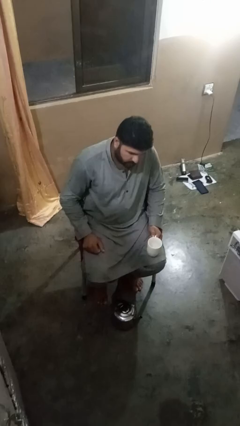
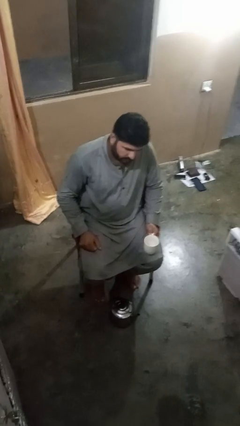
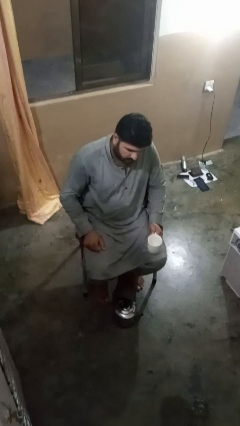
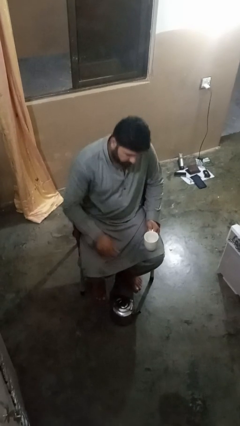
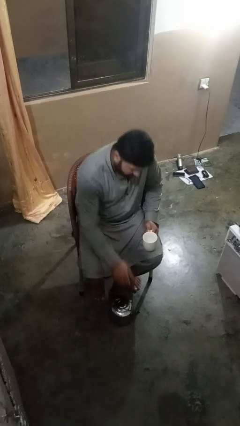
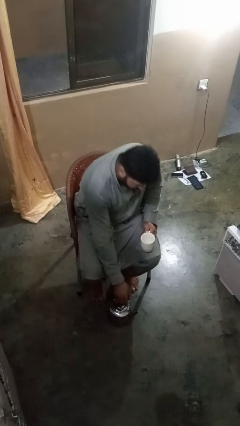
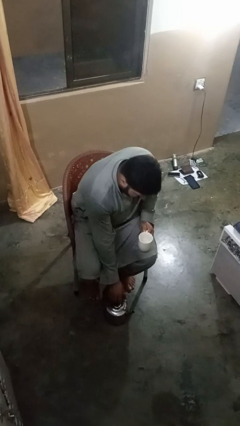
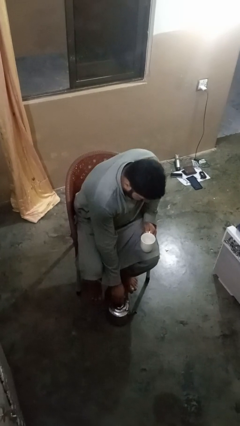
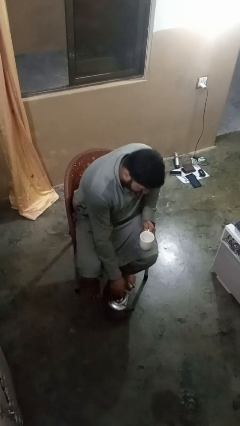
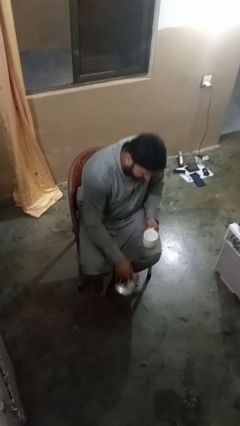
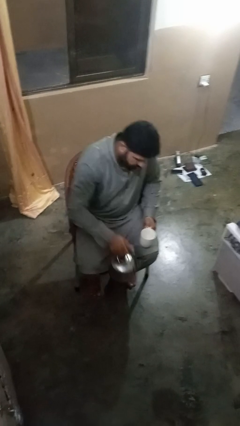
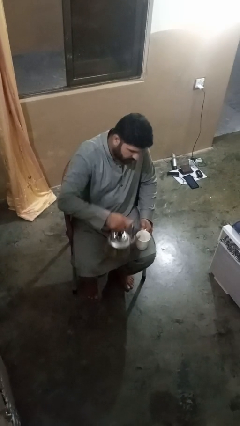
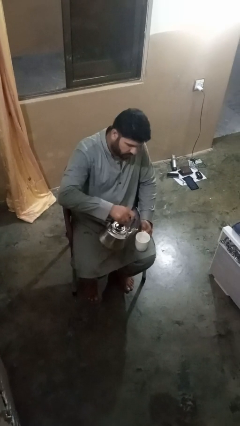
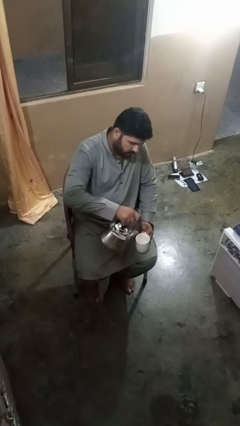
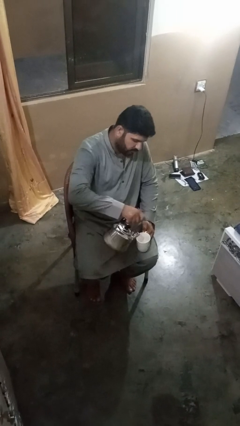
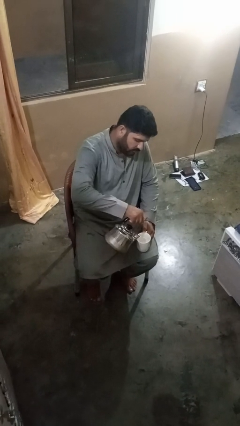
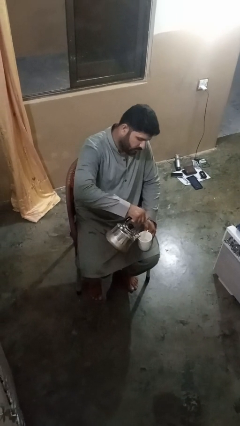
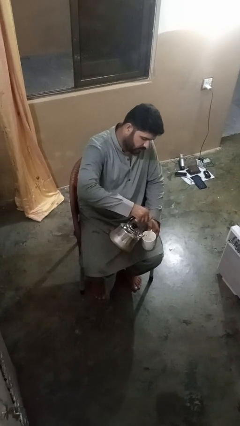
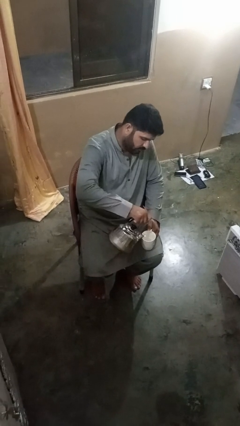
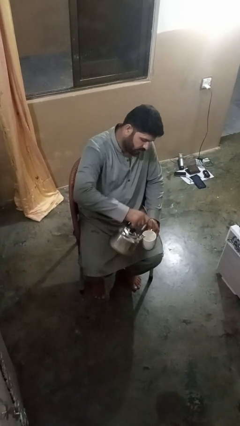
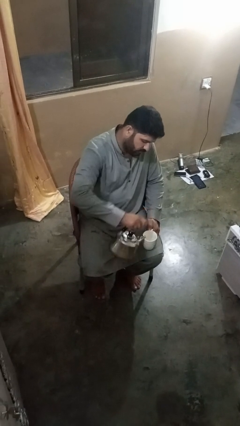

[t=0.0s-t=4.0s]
person pours coffee into mug

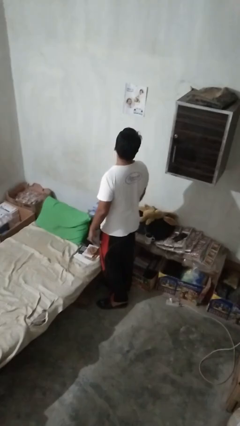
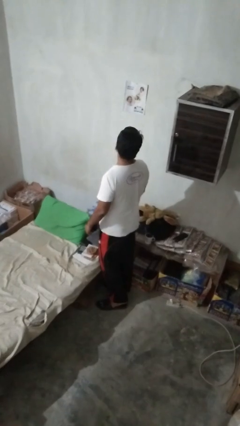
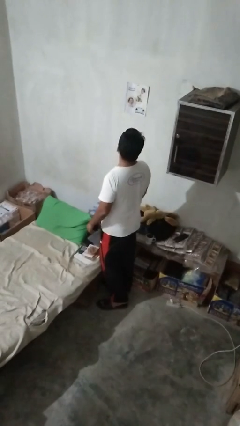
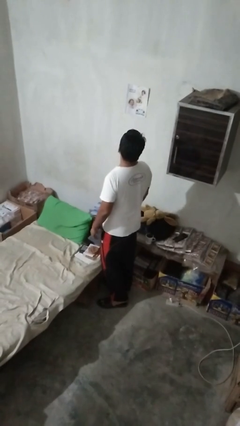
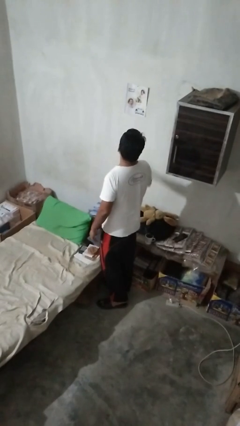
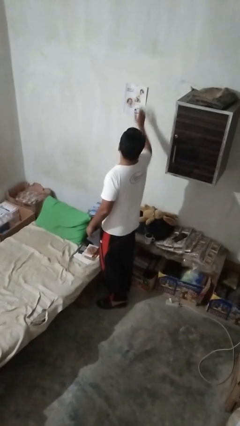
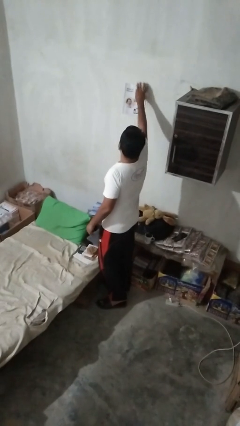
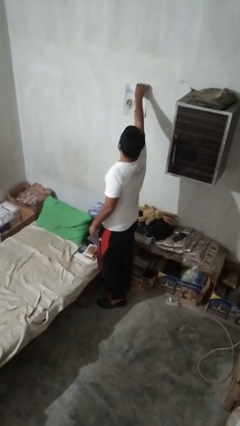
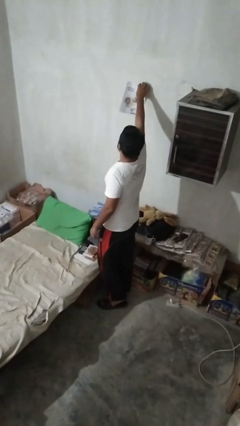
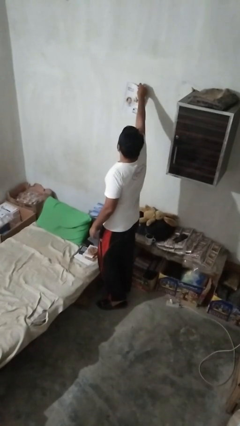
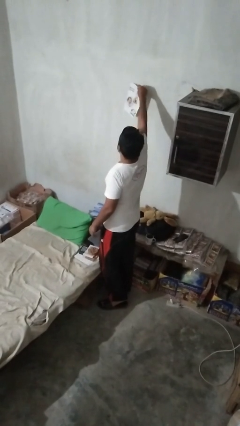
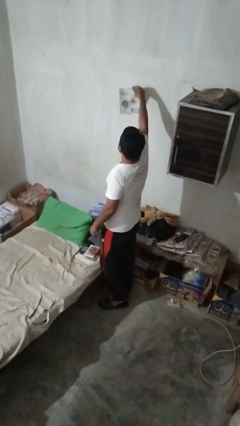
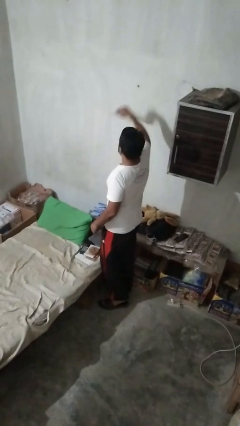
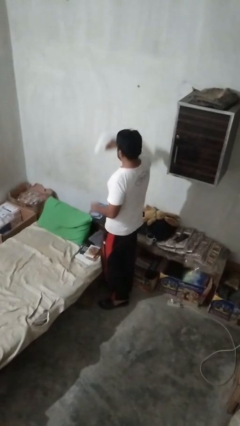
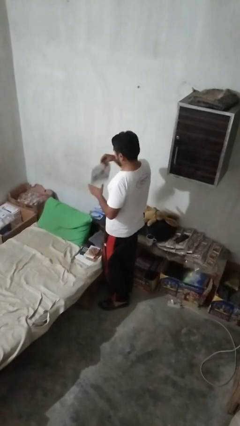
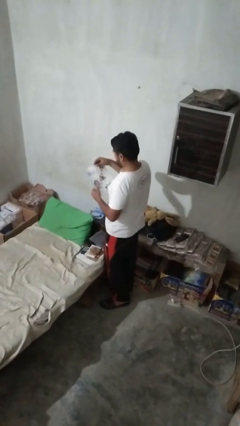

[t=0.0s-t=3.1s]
person takes down picture frame

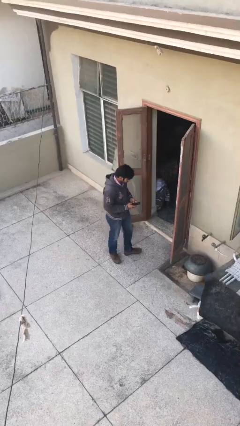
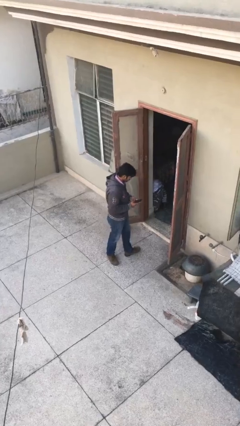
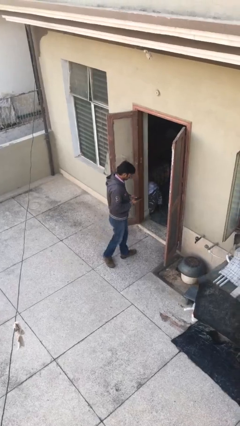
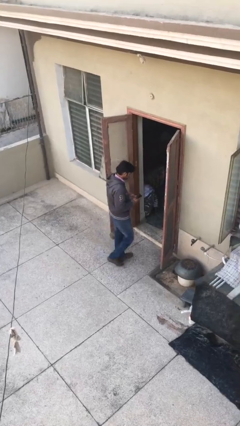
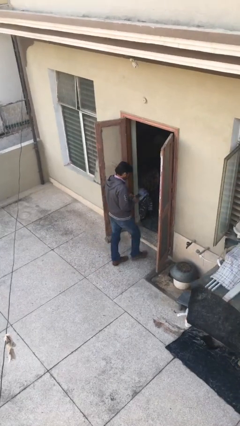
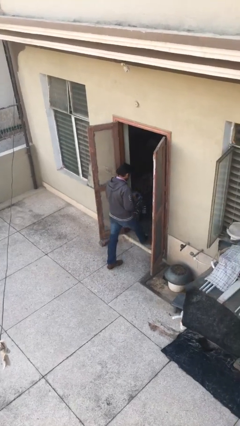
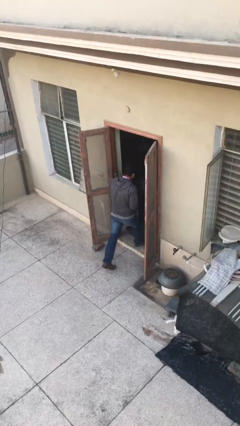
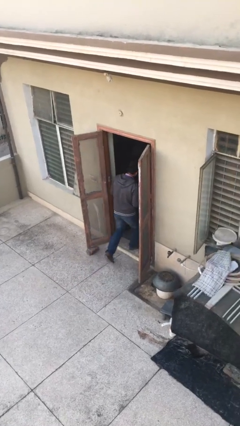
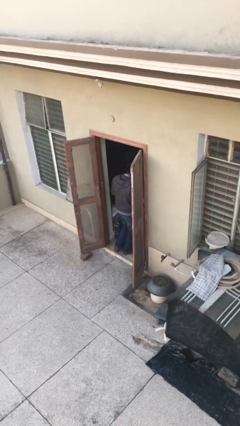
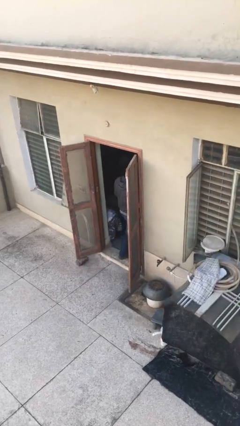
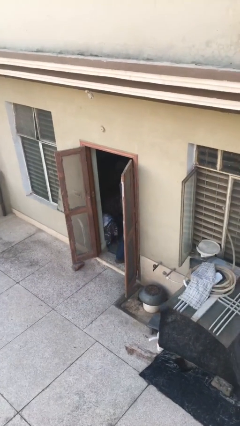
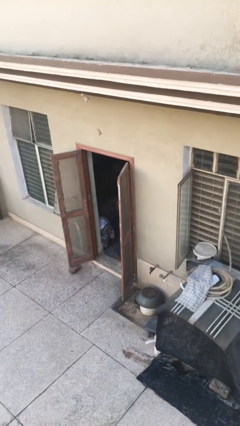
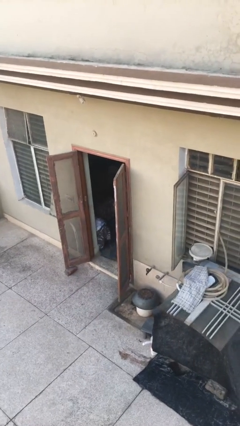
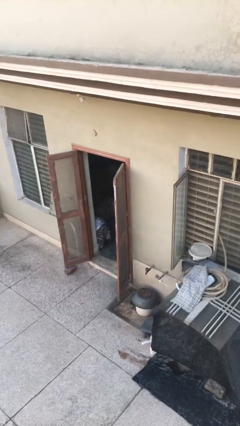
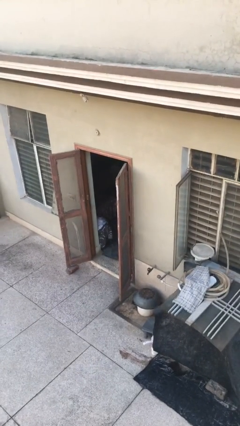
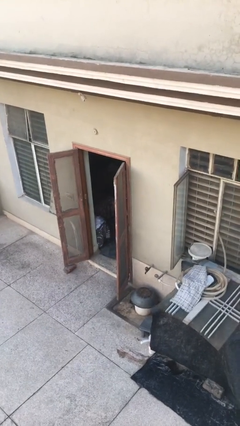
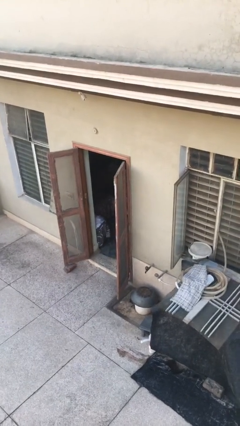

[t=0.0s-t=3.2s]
person exits scene through structure

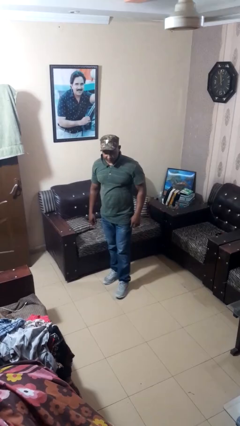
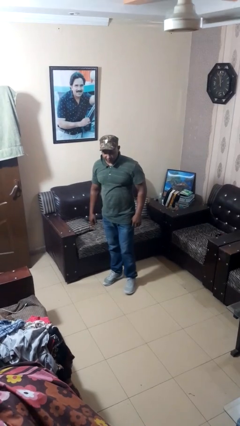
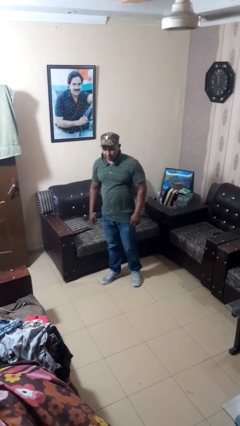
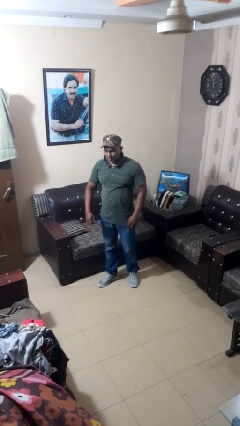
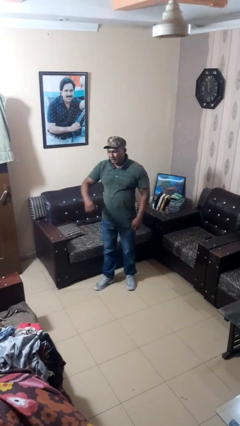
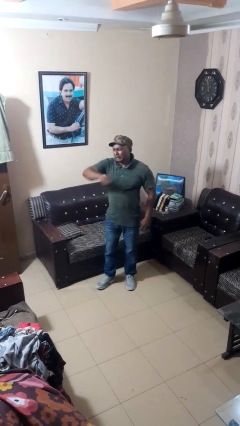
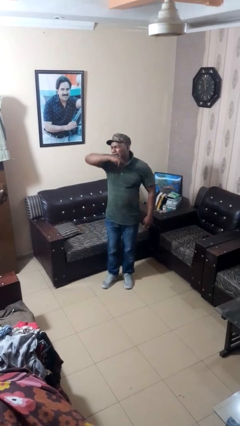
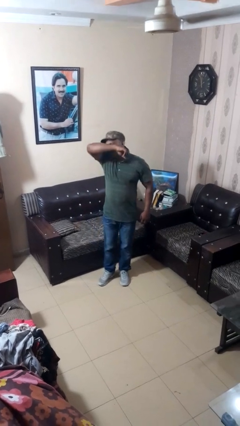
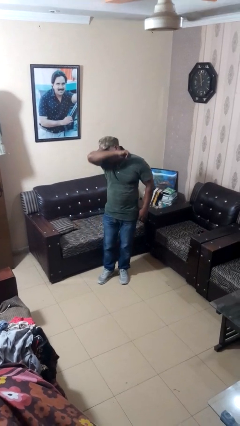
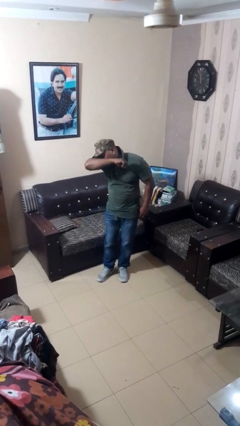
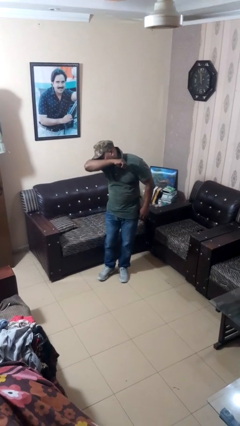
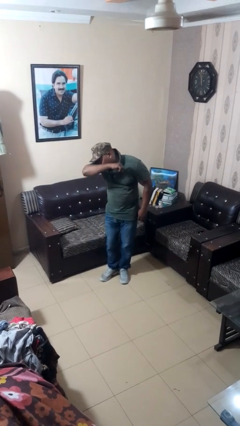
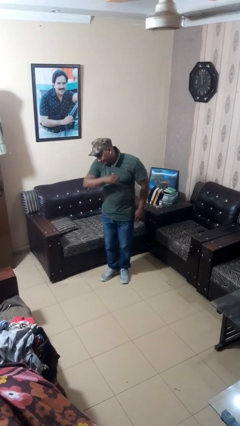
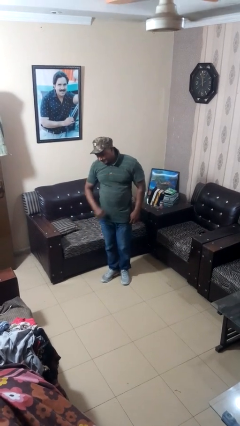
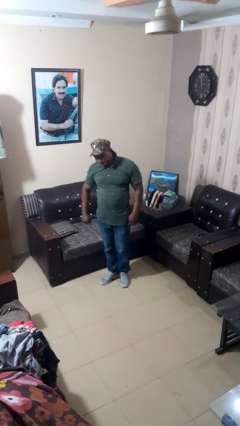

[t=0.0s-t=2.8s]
person sneezes into arm

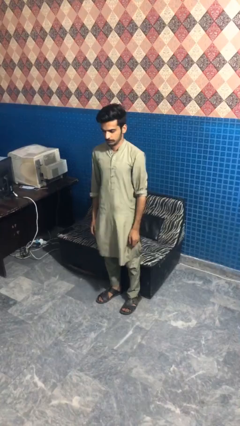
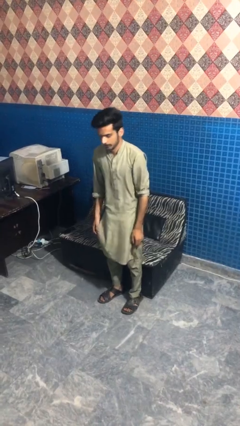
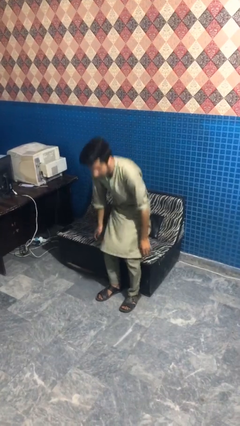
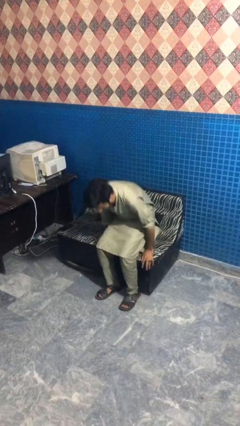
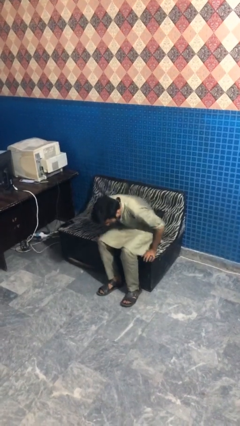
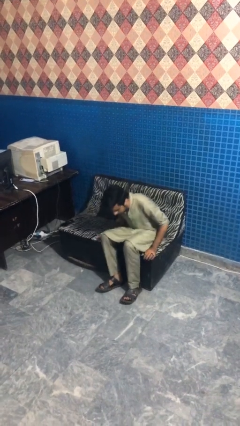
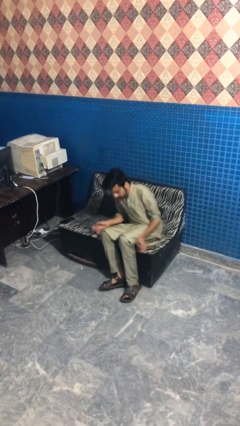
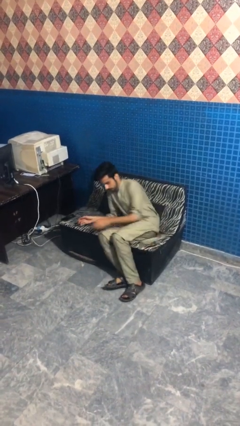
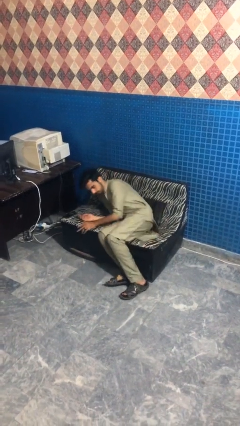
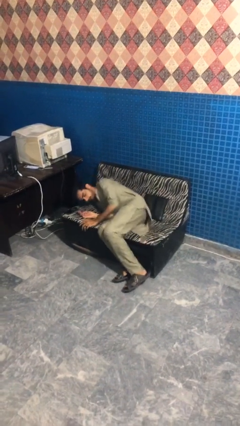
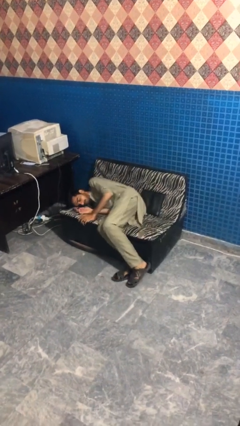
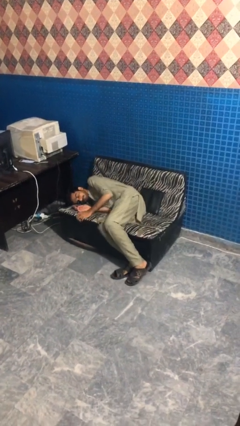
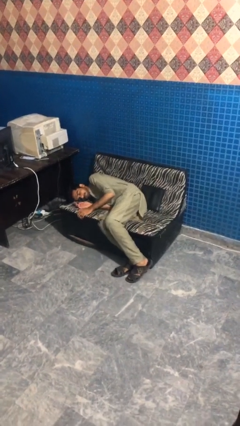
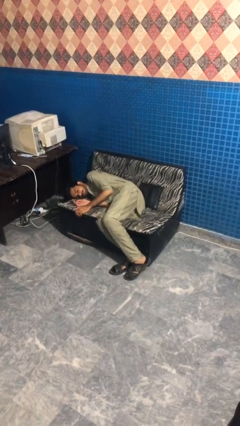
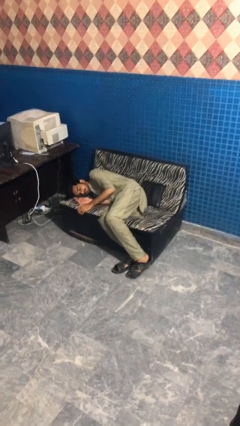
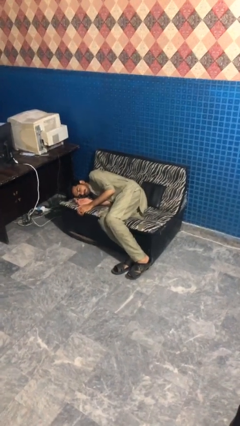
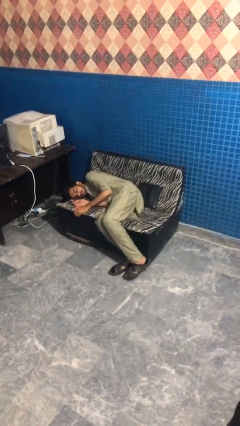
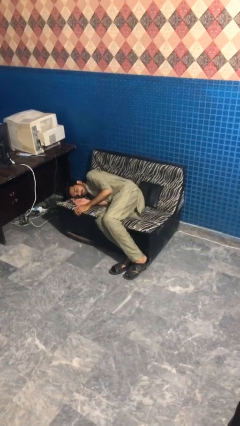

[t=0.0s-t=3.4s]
person lies down on couch

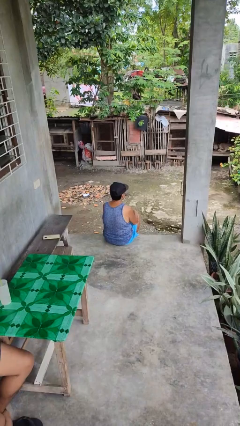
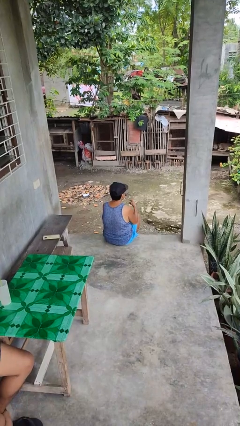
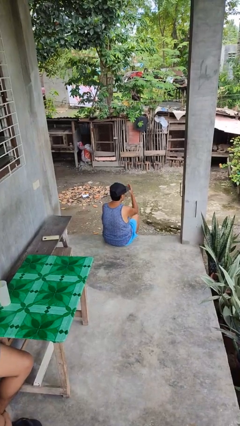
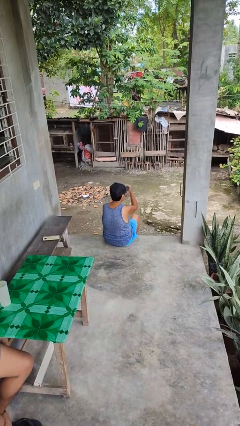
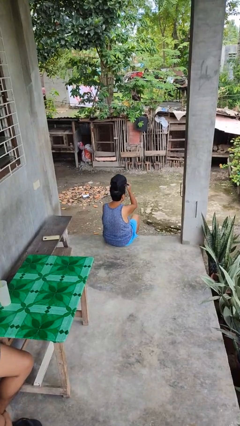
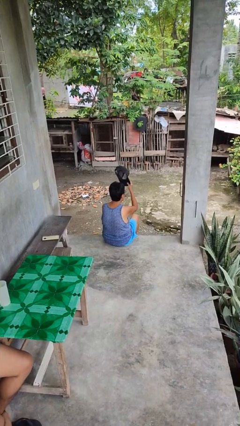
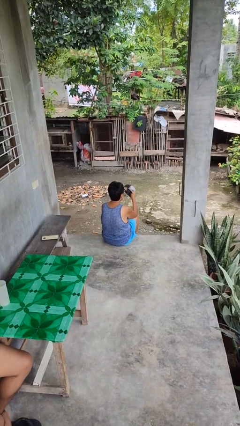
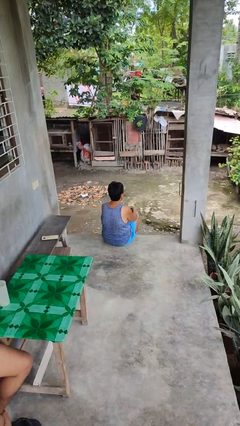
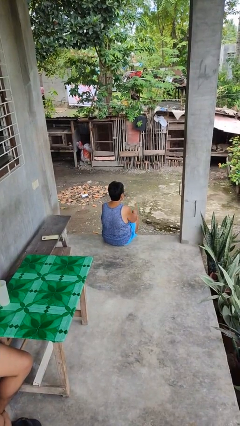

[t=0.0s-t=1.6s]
person takes off hat
